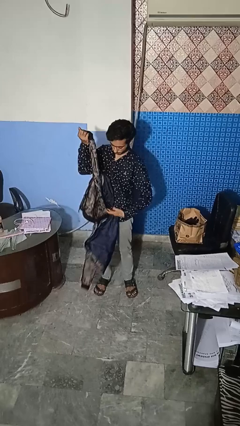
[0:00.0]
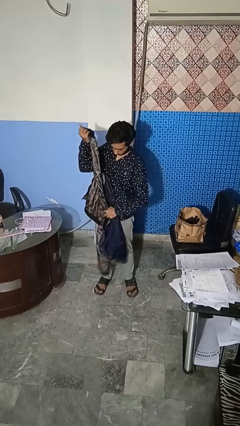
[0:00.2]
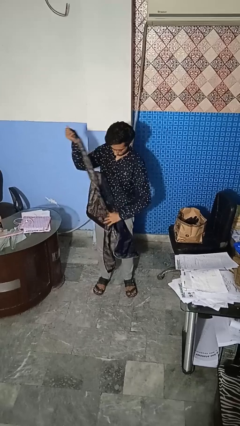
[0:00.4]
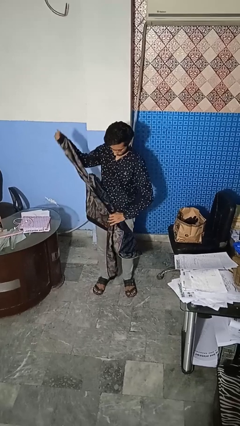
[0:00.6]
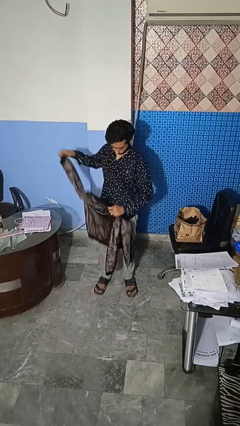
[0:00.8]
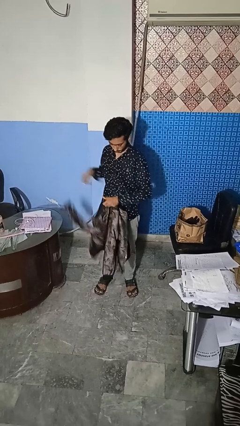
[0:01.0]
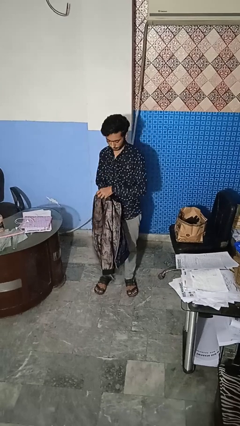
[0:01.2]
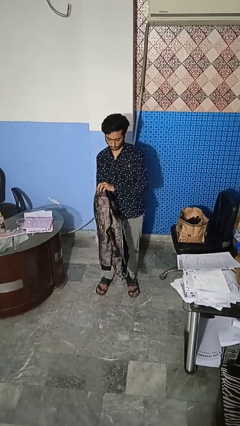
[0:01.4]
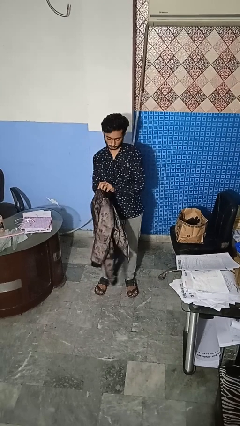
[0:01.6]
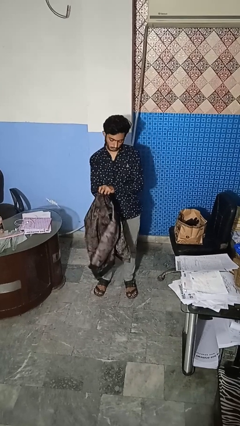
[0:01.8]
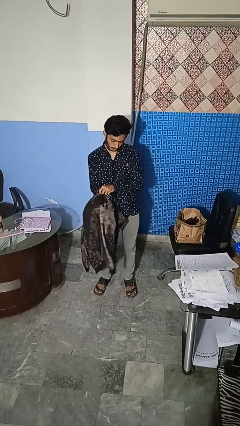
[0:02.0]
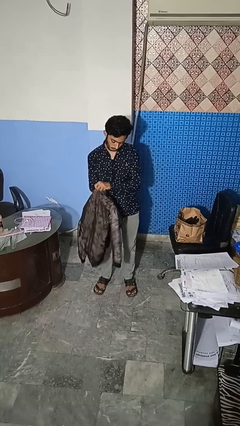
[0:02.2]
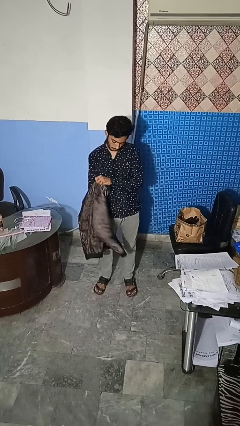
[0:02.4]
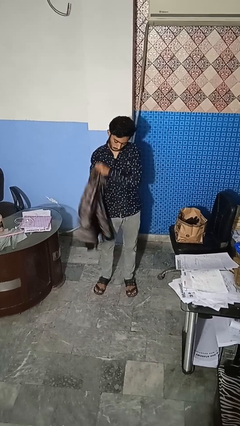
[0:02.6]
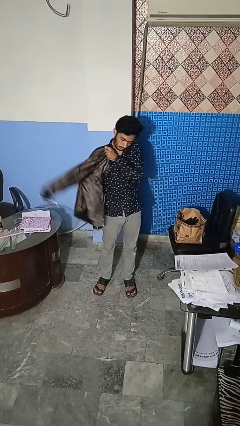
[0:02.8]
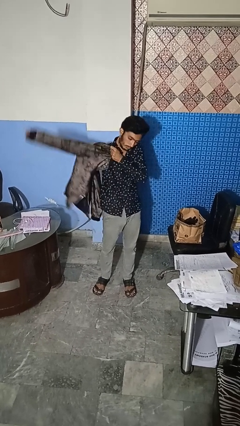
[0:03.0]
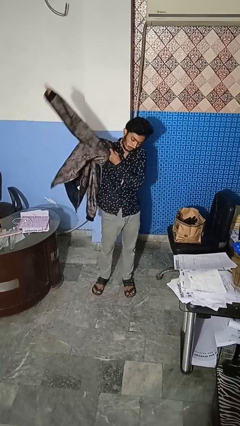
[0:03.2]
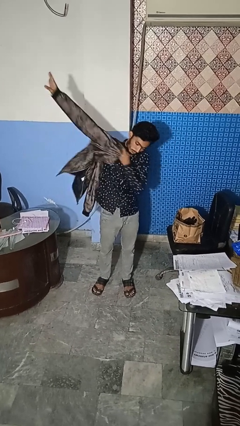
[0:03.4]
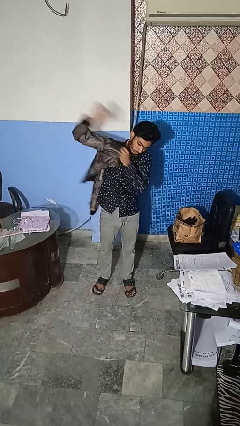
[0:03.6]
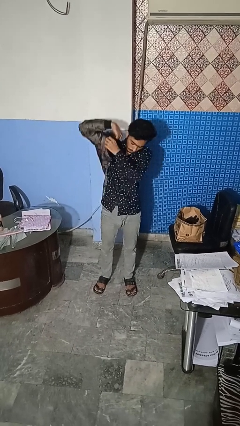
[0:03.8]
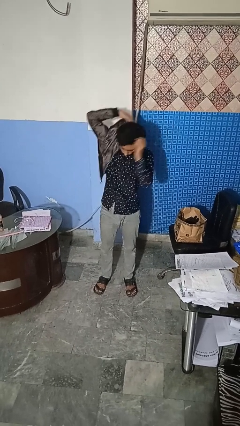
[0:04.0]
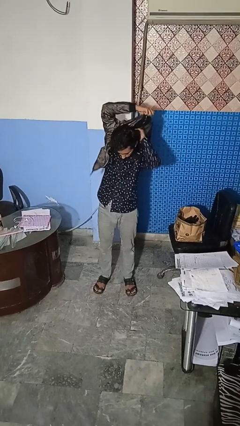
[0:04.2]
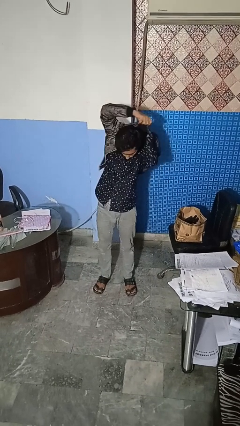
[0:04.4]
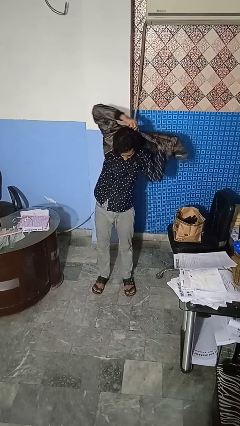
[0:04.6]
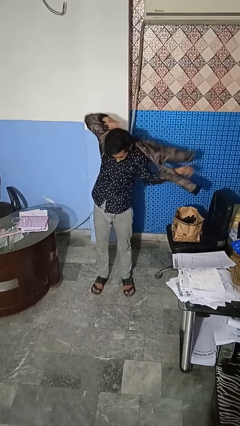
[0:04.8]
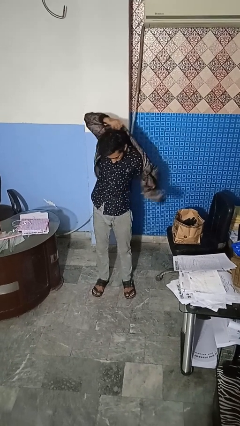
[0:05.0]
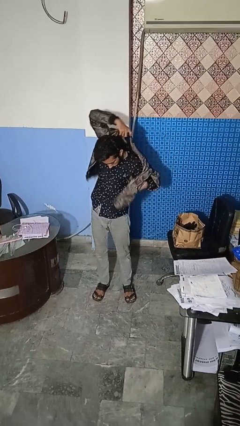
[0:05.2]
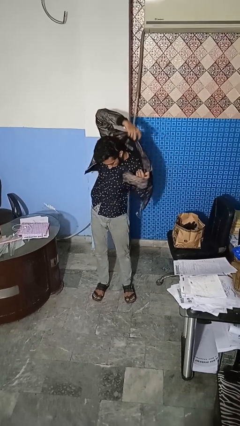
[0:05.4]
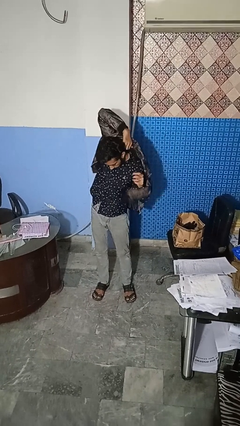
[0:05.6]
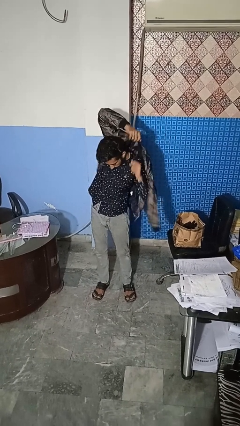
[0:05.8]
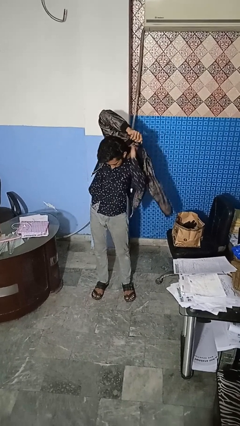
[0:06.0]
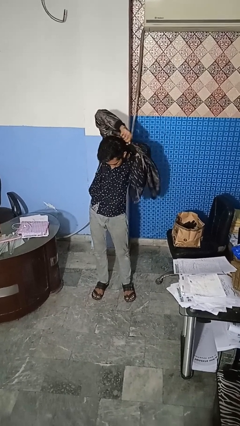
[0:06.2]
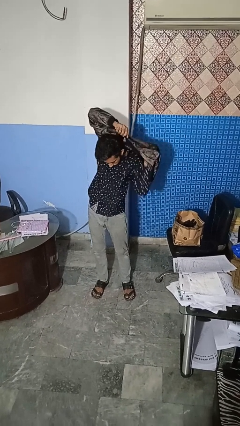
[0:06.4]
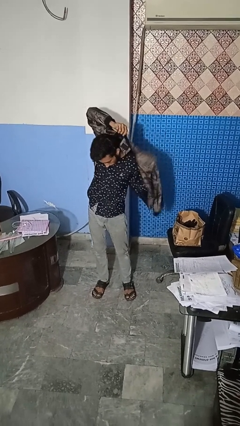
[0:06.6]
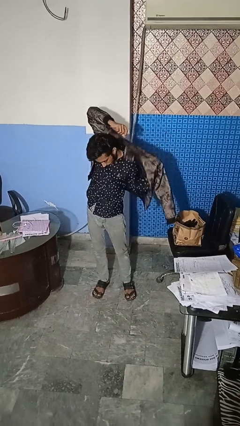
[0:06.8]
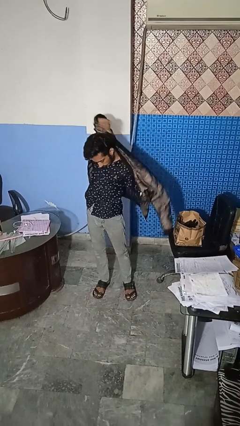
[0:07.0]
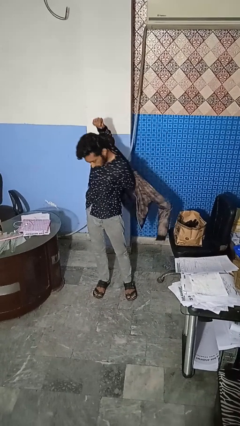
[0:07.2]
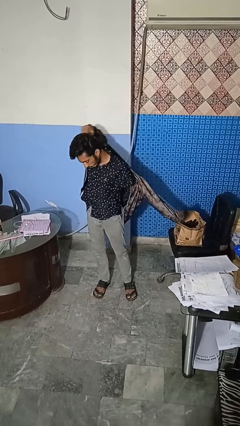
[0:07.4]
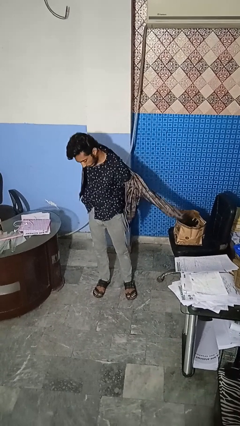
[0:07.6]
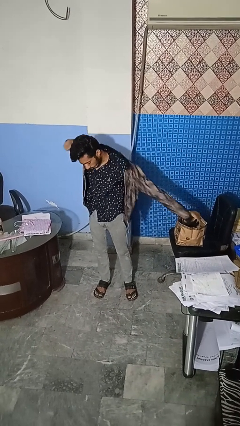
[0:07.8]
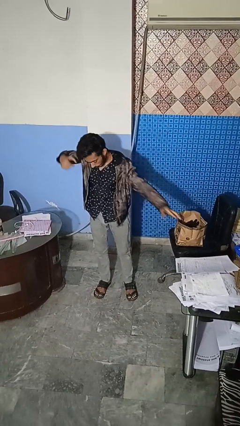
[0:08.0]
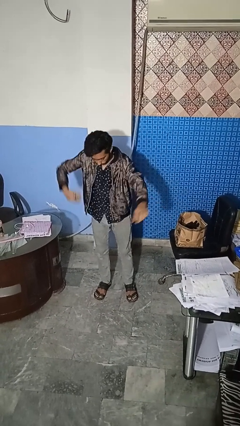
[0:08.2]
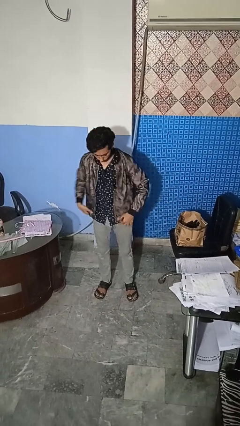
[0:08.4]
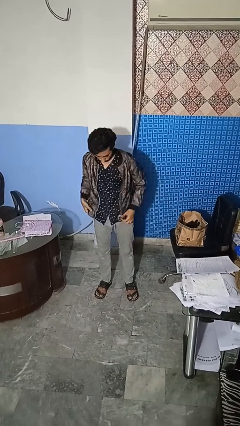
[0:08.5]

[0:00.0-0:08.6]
person puts on jacket

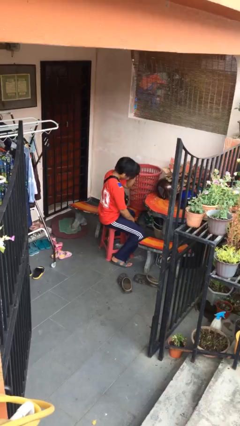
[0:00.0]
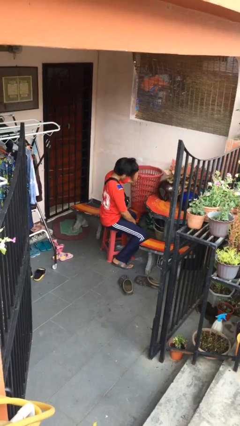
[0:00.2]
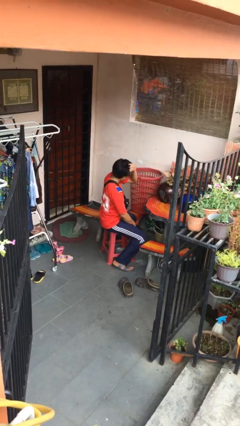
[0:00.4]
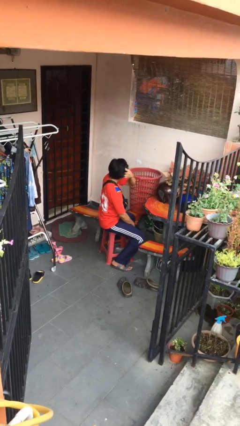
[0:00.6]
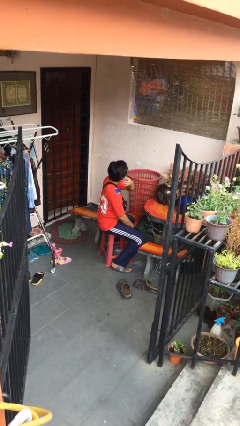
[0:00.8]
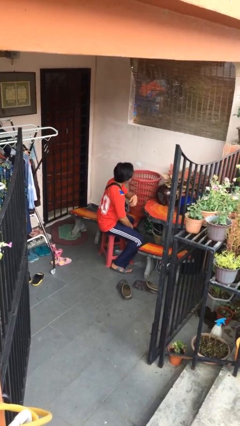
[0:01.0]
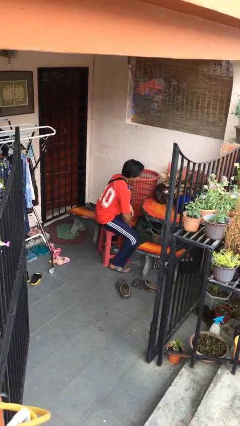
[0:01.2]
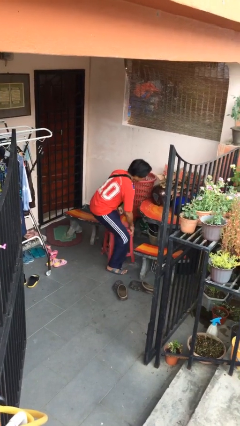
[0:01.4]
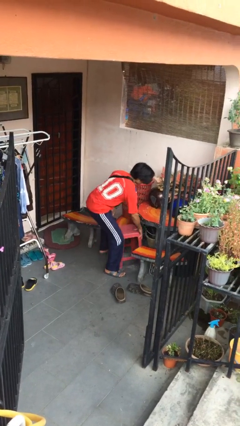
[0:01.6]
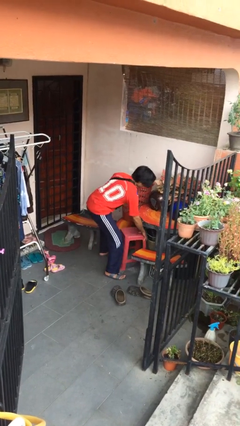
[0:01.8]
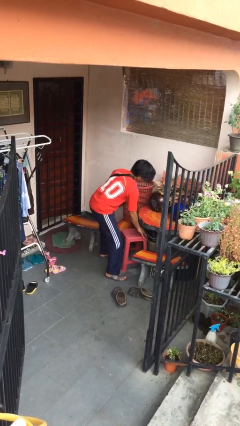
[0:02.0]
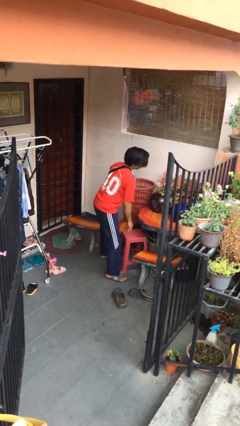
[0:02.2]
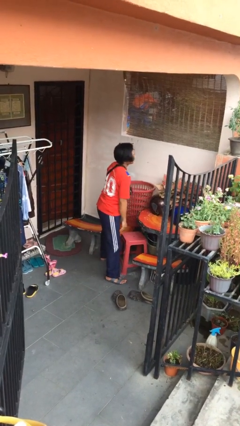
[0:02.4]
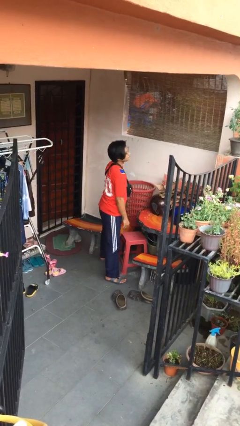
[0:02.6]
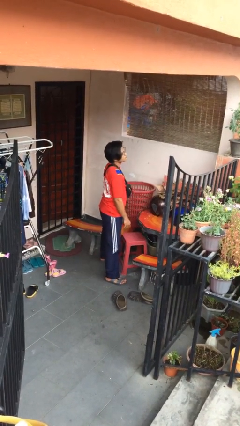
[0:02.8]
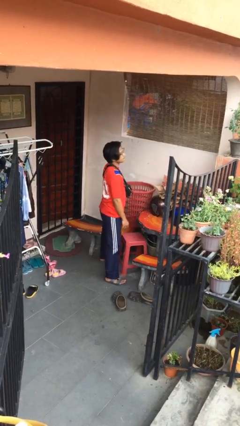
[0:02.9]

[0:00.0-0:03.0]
person stands up

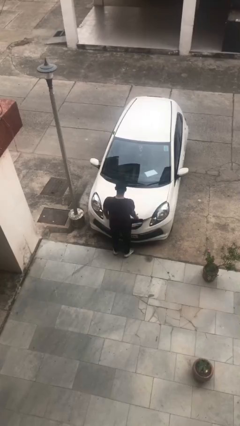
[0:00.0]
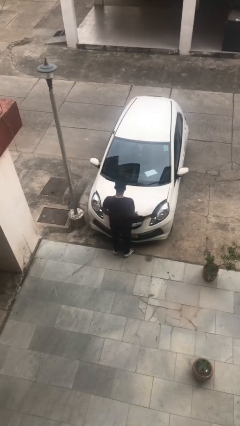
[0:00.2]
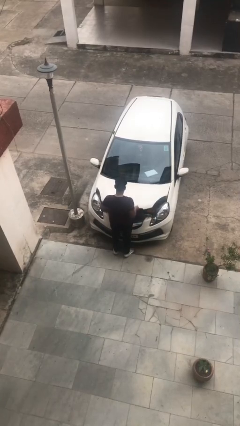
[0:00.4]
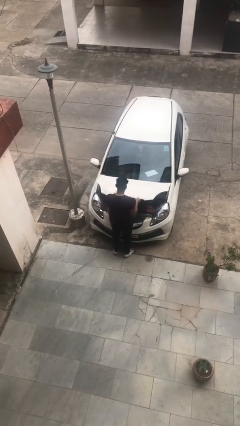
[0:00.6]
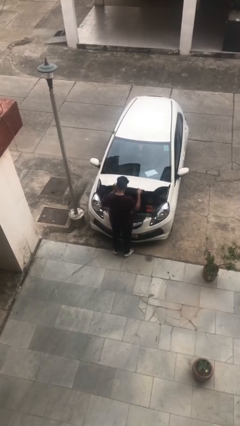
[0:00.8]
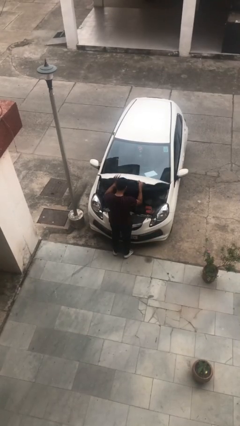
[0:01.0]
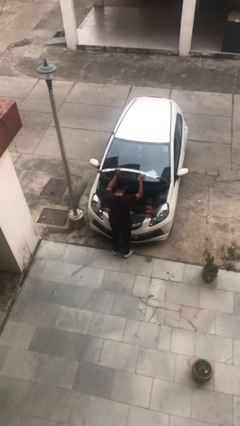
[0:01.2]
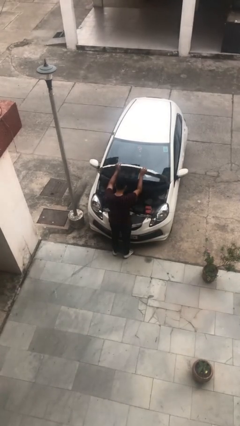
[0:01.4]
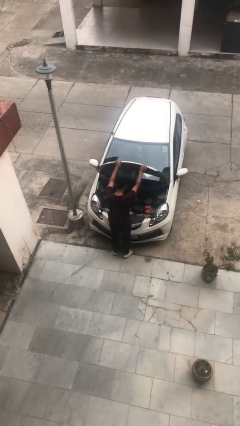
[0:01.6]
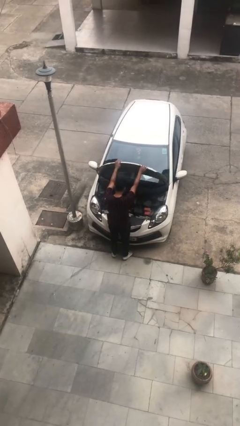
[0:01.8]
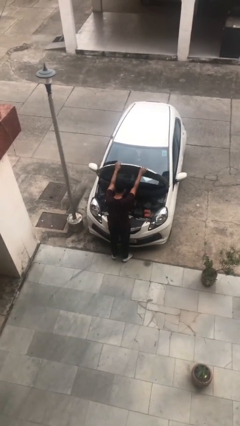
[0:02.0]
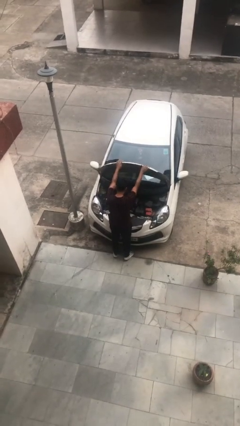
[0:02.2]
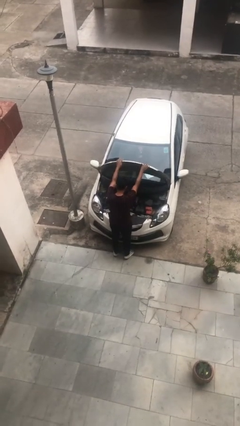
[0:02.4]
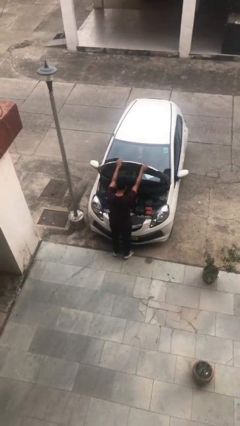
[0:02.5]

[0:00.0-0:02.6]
person opens car hood

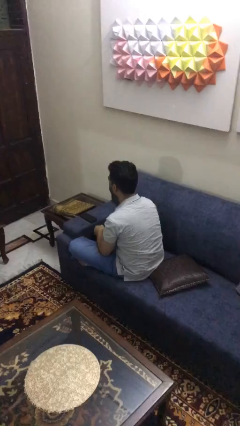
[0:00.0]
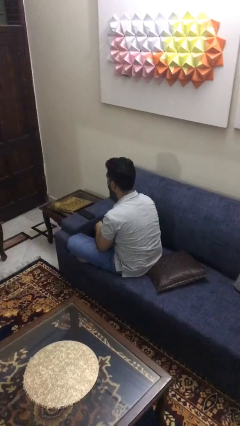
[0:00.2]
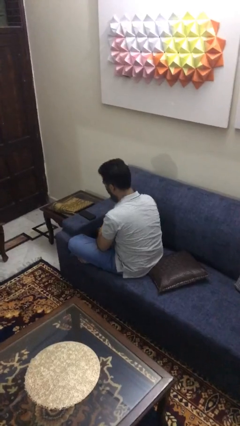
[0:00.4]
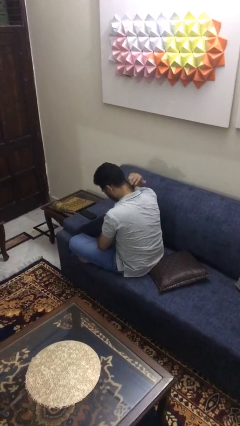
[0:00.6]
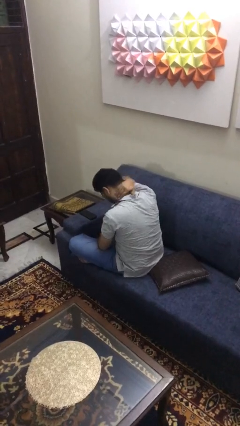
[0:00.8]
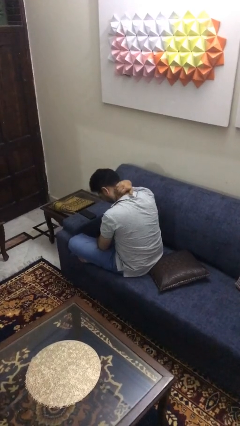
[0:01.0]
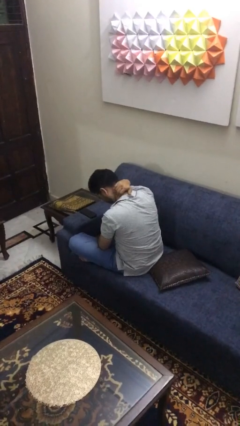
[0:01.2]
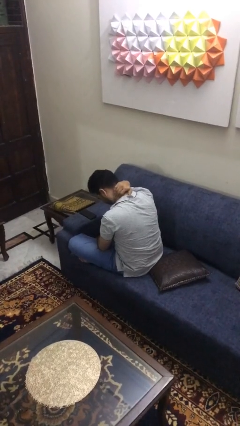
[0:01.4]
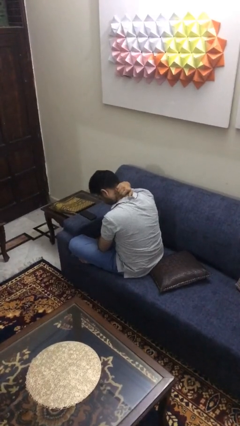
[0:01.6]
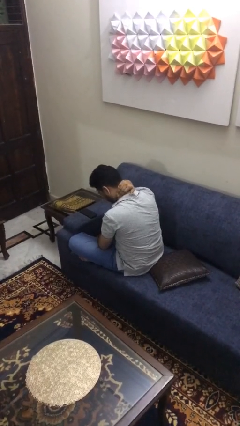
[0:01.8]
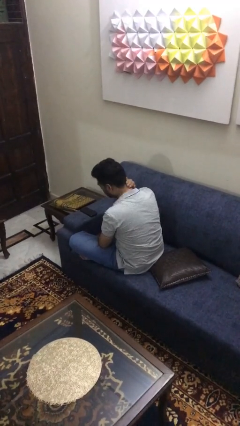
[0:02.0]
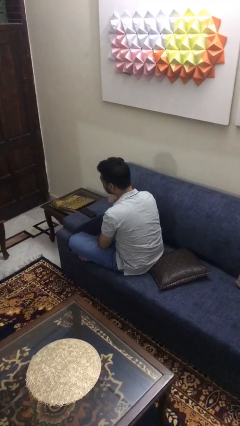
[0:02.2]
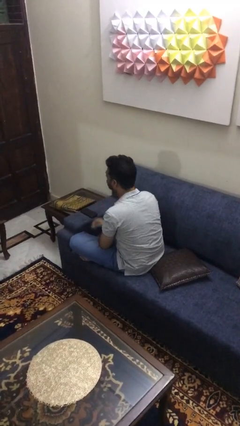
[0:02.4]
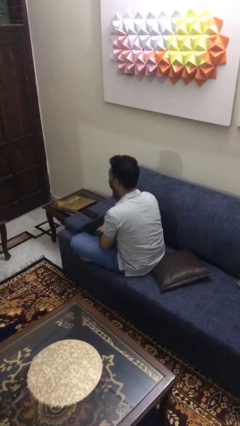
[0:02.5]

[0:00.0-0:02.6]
person rubs neck

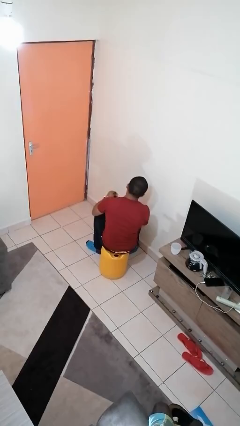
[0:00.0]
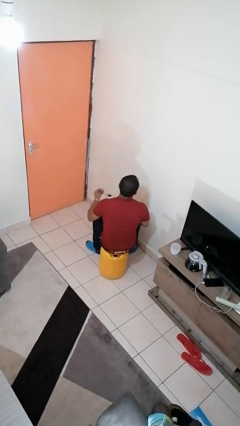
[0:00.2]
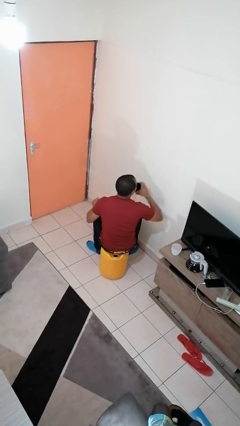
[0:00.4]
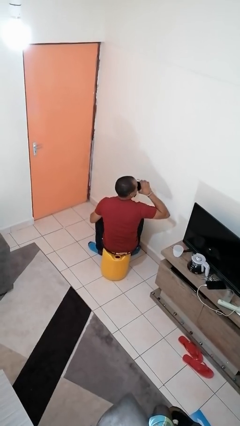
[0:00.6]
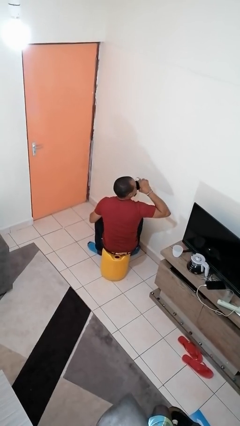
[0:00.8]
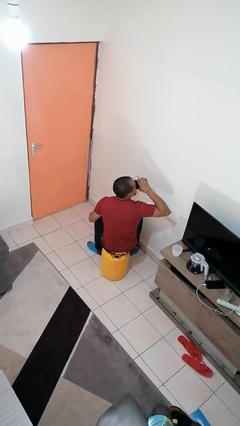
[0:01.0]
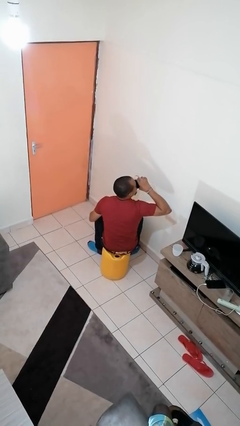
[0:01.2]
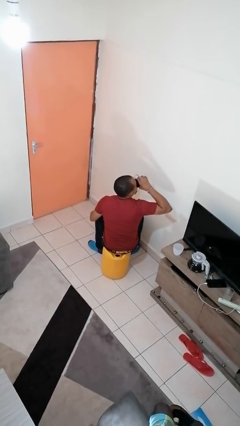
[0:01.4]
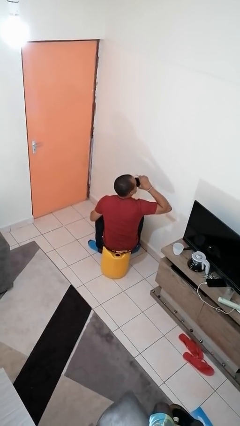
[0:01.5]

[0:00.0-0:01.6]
person drinks from mug
